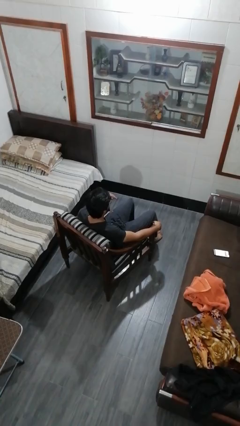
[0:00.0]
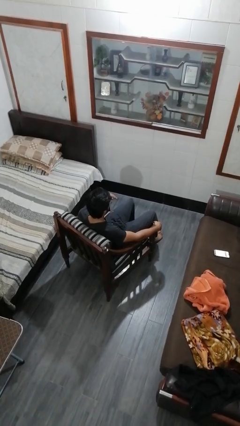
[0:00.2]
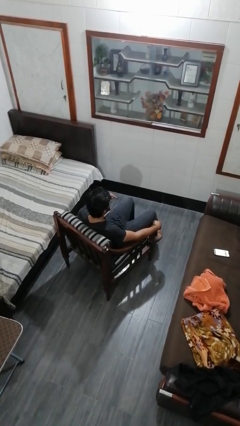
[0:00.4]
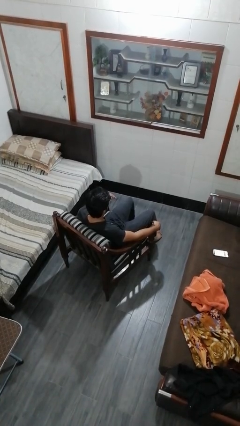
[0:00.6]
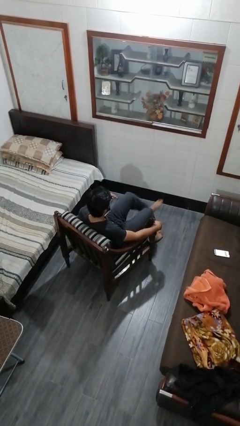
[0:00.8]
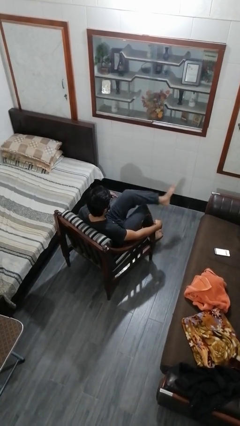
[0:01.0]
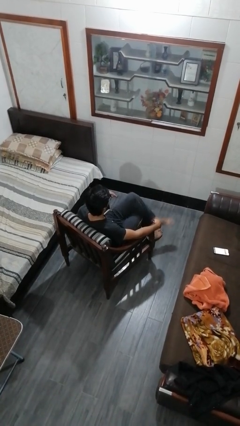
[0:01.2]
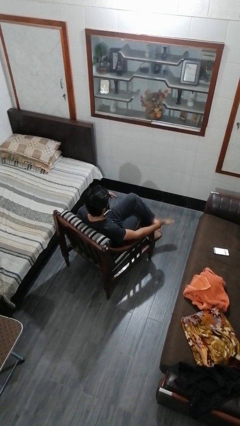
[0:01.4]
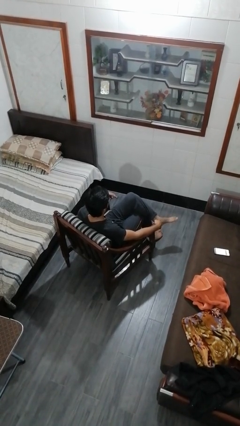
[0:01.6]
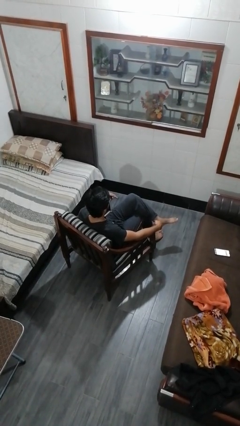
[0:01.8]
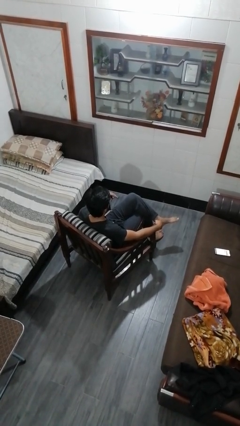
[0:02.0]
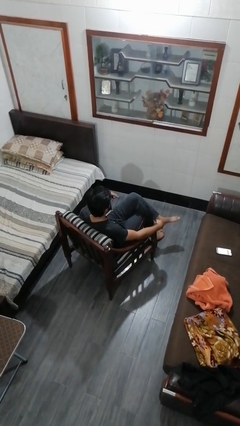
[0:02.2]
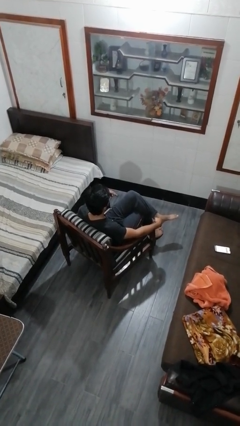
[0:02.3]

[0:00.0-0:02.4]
person crosses legs

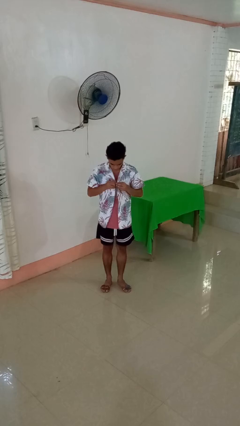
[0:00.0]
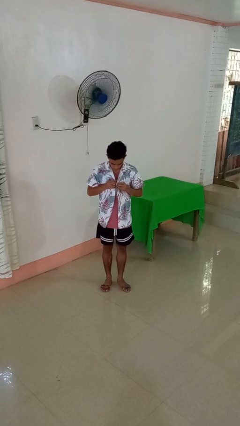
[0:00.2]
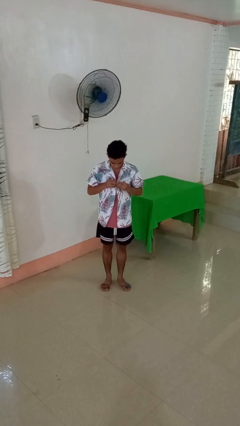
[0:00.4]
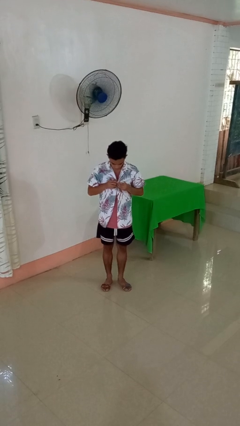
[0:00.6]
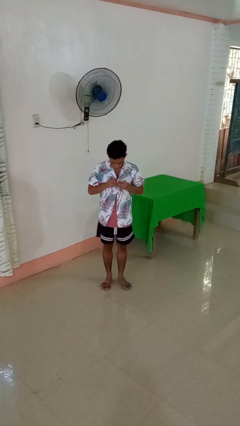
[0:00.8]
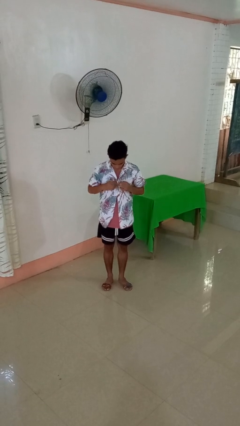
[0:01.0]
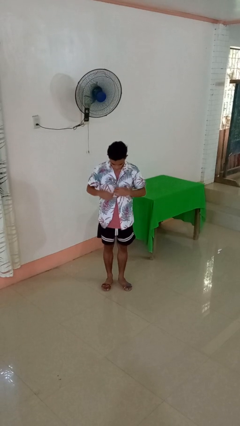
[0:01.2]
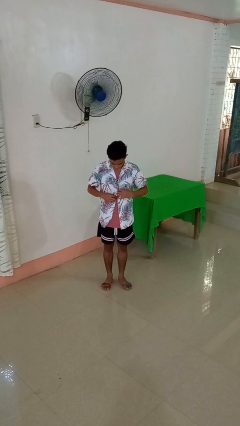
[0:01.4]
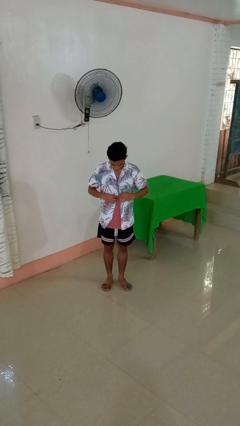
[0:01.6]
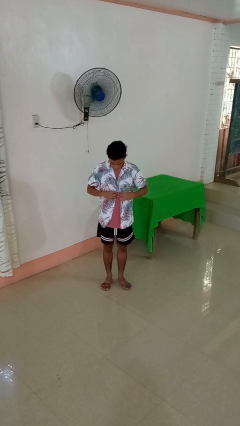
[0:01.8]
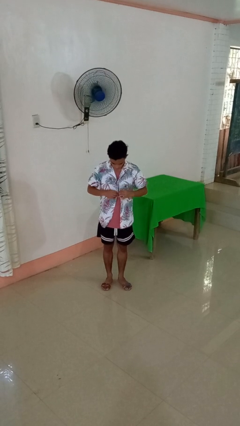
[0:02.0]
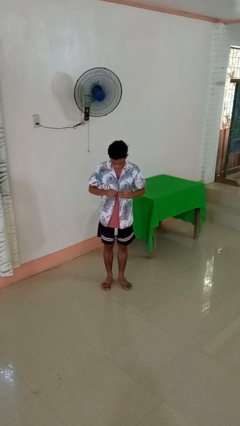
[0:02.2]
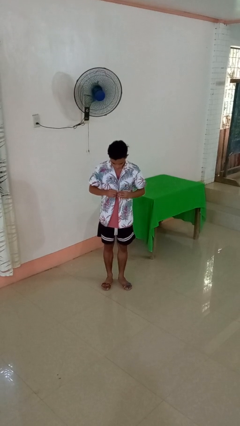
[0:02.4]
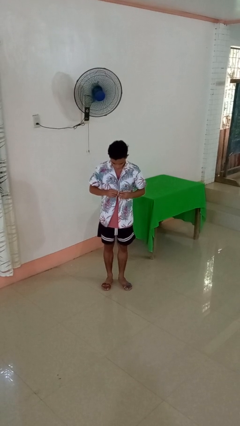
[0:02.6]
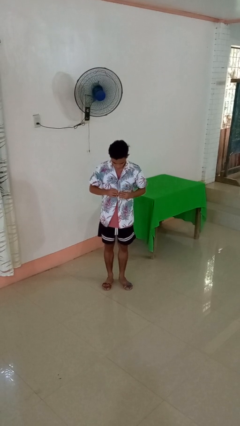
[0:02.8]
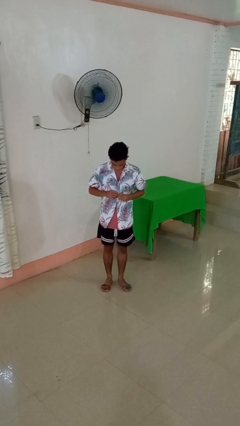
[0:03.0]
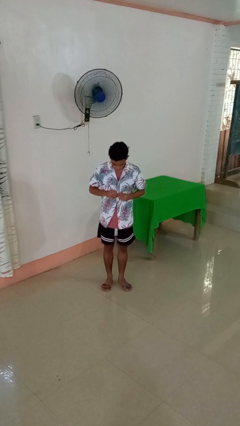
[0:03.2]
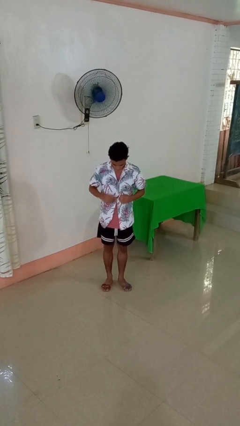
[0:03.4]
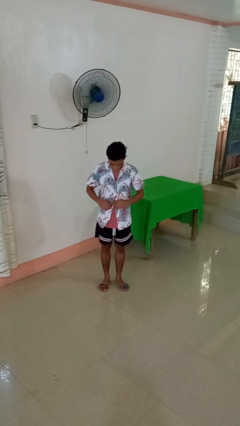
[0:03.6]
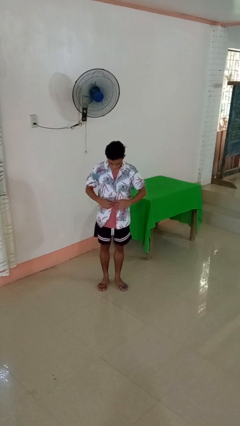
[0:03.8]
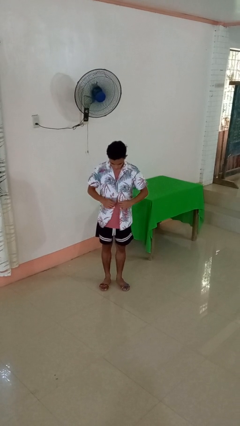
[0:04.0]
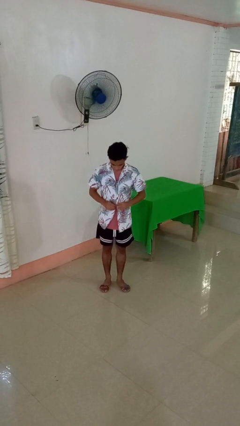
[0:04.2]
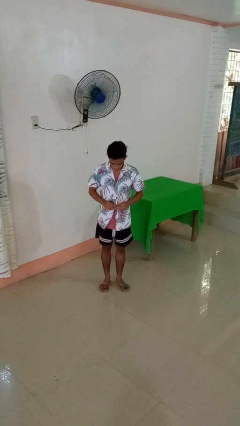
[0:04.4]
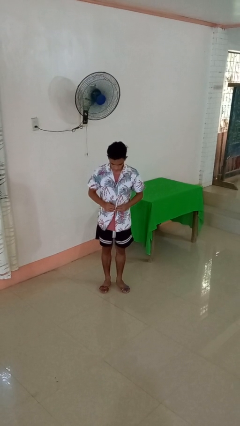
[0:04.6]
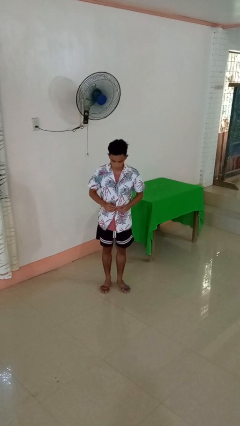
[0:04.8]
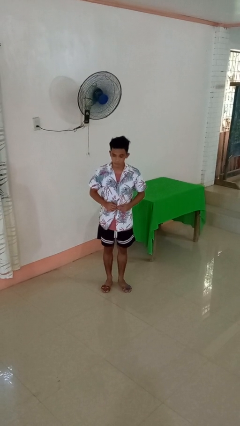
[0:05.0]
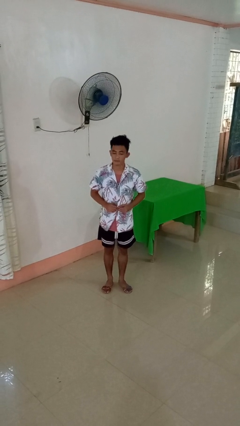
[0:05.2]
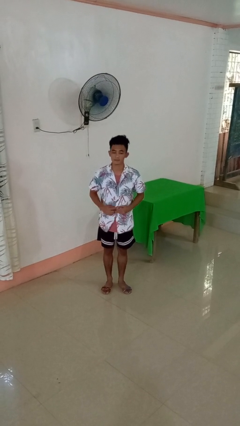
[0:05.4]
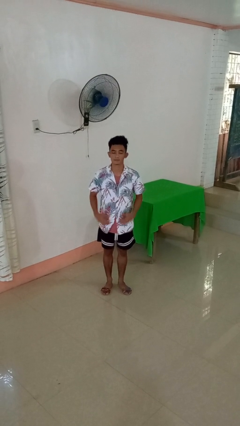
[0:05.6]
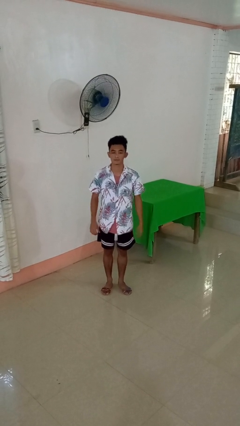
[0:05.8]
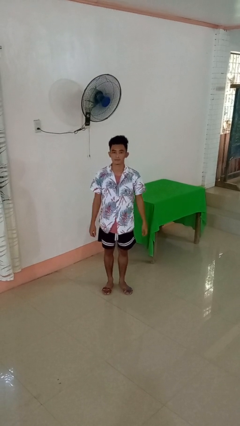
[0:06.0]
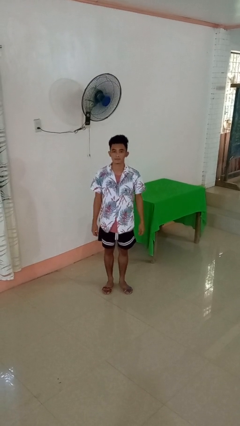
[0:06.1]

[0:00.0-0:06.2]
person buttons shirt

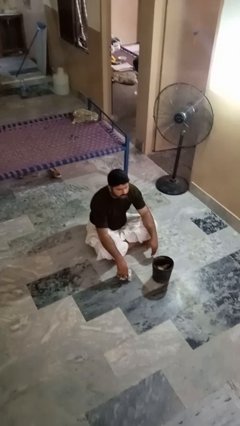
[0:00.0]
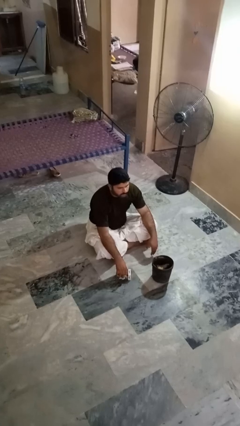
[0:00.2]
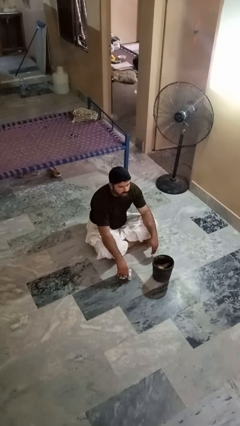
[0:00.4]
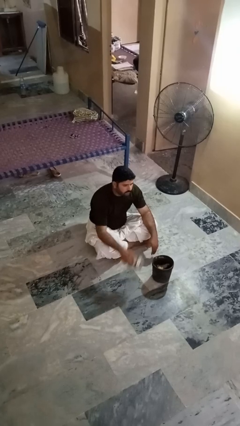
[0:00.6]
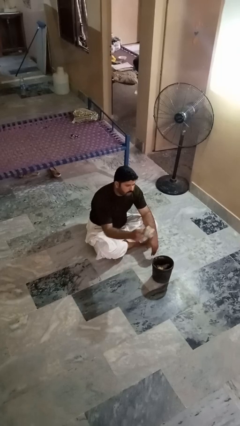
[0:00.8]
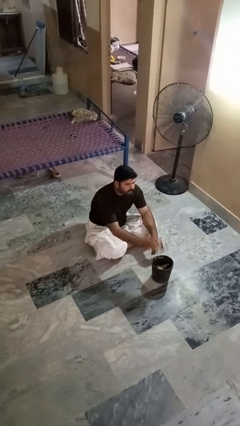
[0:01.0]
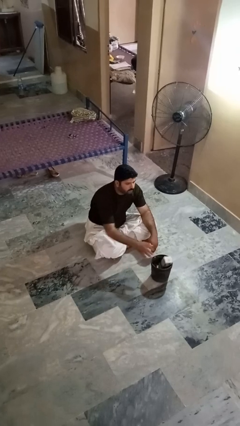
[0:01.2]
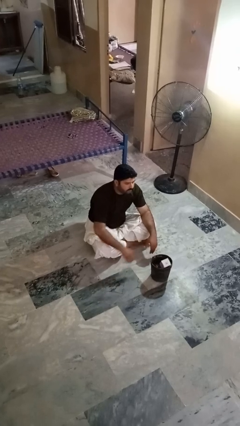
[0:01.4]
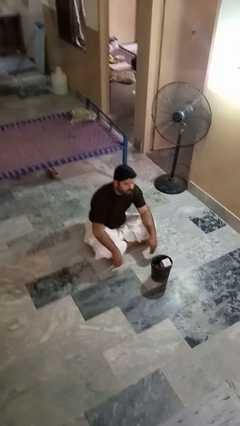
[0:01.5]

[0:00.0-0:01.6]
person puts object into basket

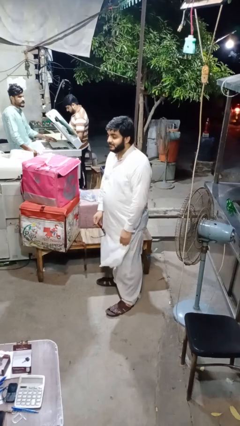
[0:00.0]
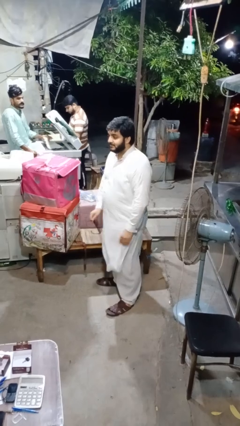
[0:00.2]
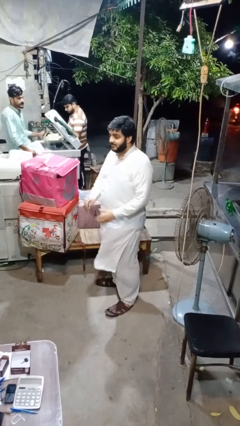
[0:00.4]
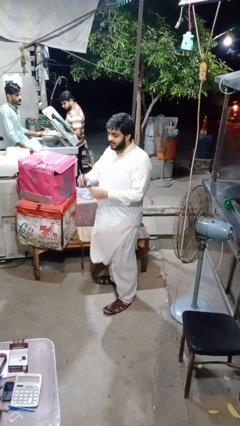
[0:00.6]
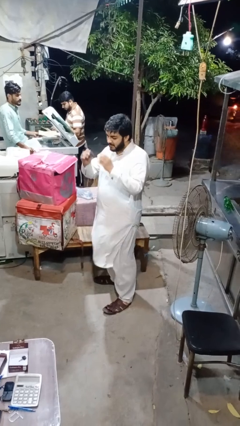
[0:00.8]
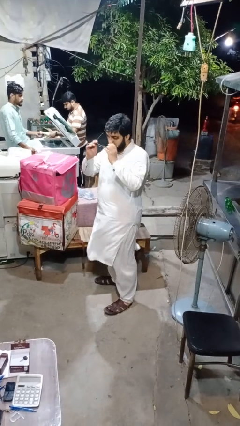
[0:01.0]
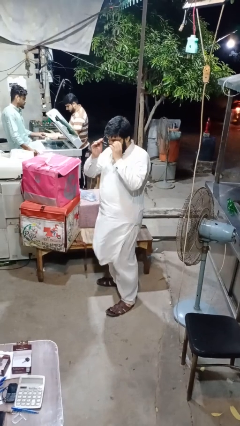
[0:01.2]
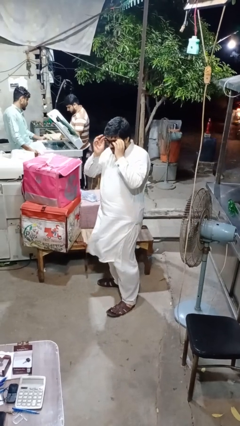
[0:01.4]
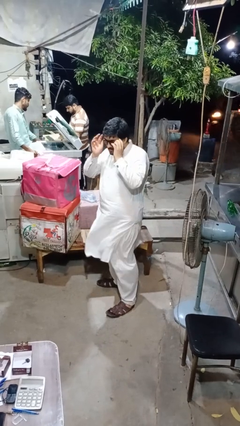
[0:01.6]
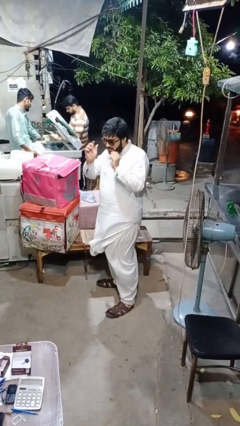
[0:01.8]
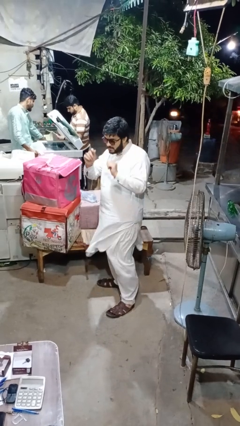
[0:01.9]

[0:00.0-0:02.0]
person puts on glasses

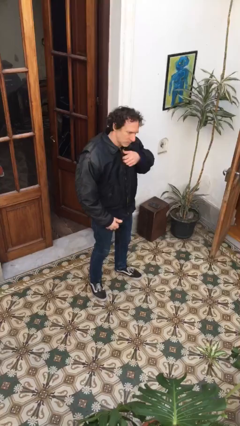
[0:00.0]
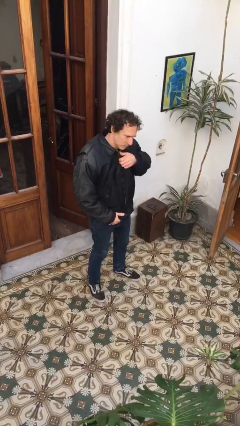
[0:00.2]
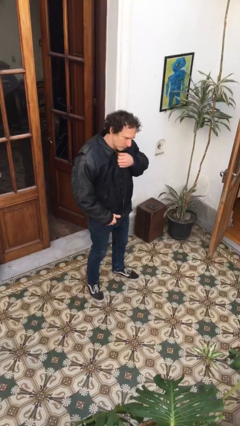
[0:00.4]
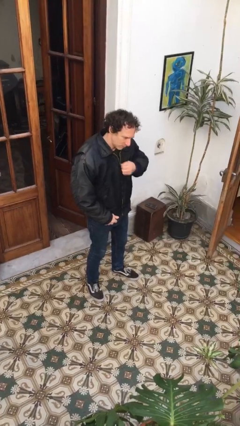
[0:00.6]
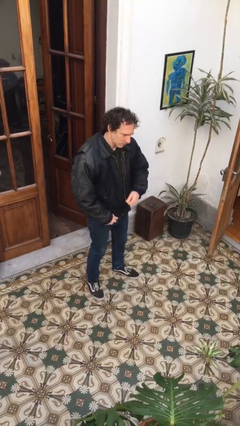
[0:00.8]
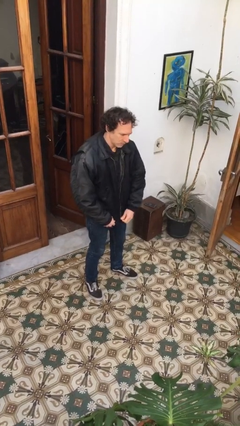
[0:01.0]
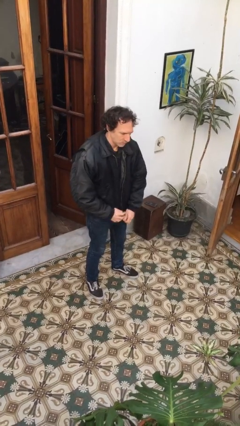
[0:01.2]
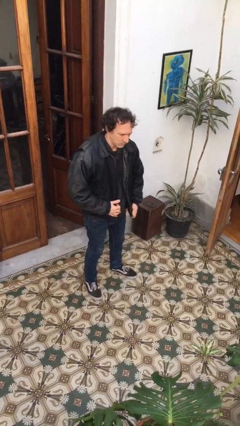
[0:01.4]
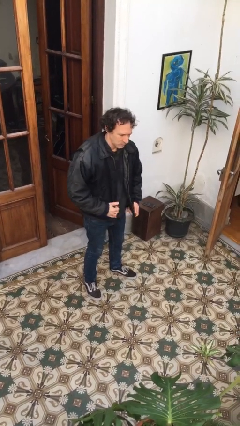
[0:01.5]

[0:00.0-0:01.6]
person unzips jacket

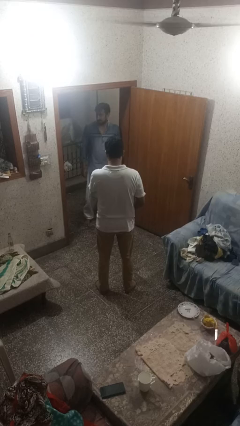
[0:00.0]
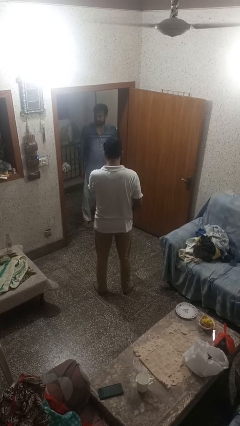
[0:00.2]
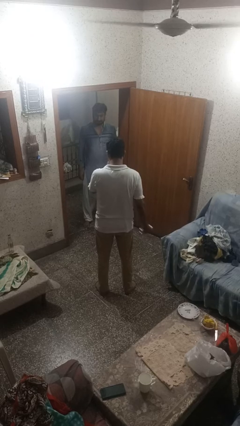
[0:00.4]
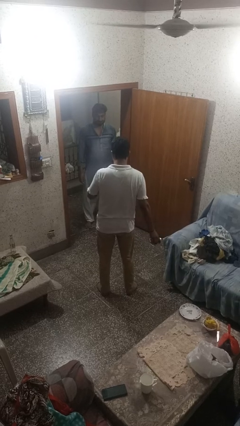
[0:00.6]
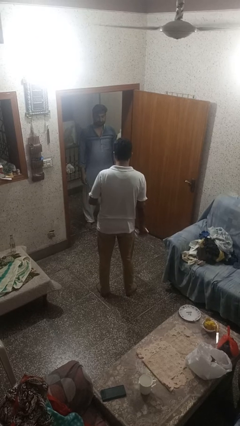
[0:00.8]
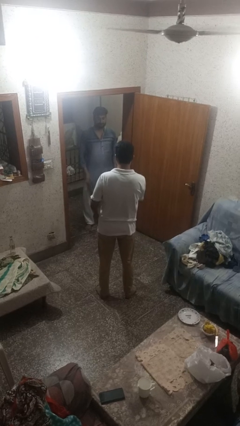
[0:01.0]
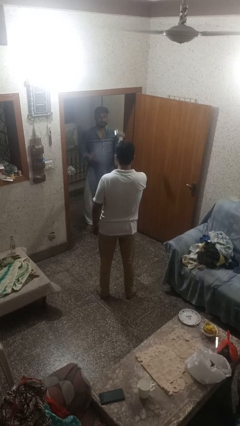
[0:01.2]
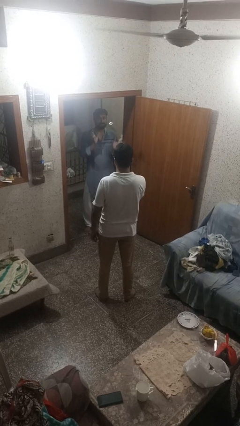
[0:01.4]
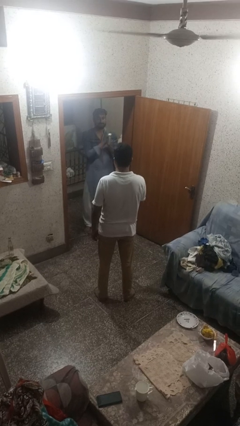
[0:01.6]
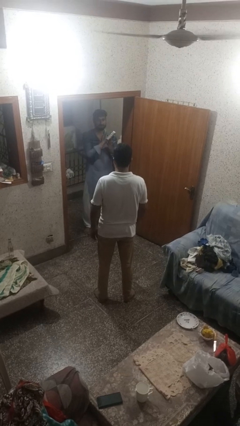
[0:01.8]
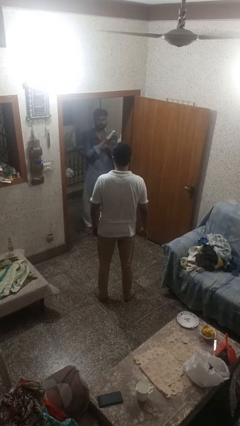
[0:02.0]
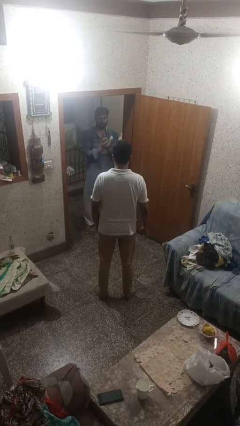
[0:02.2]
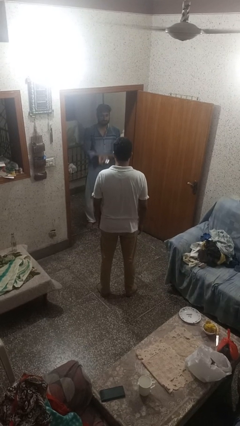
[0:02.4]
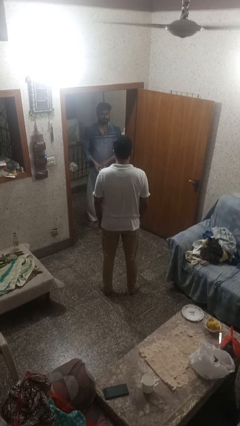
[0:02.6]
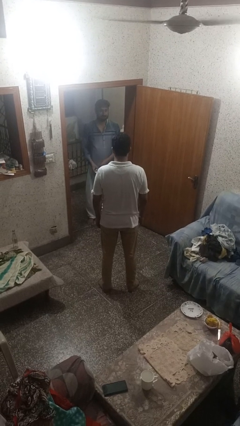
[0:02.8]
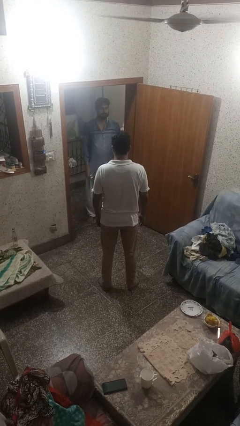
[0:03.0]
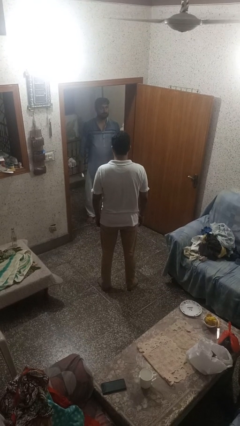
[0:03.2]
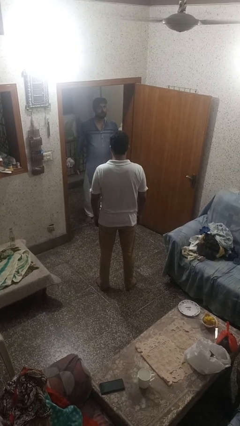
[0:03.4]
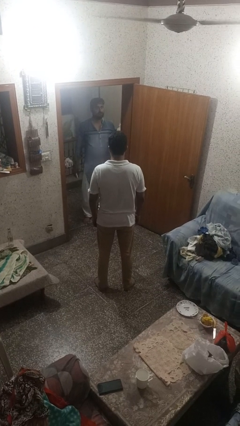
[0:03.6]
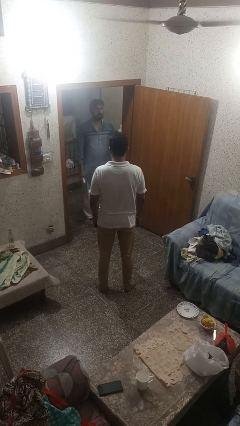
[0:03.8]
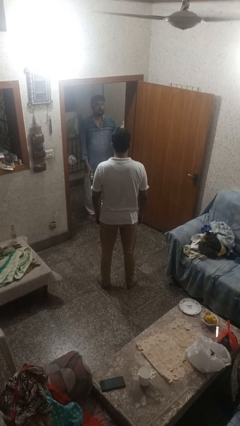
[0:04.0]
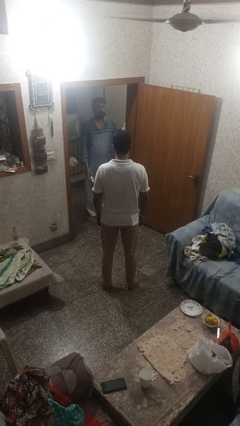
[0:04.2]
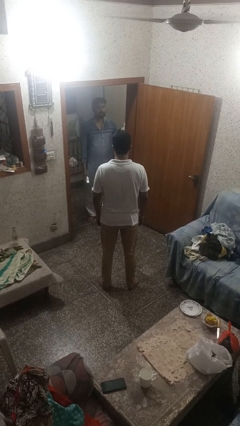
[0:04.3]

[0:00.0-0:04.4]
person throws object to person
